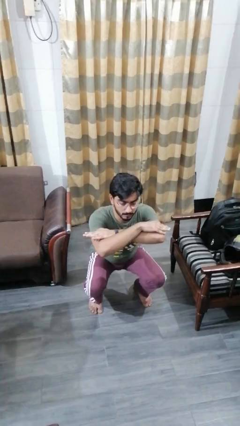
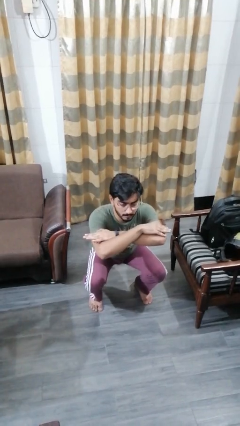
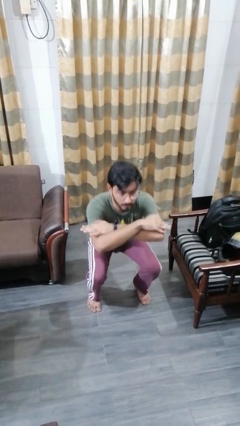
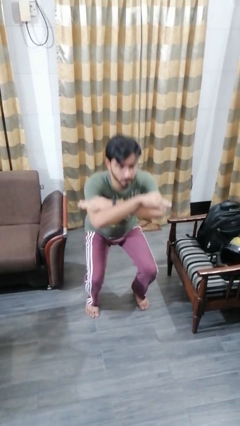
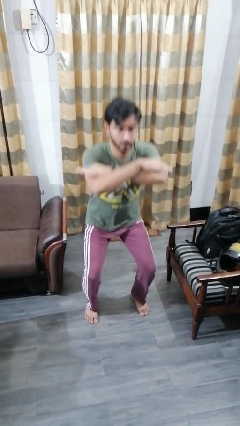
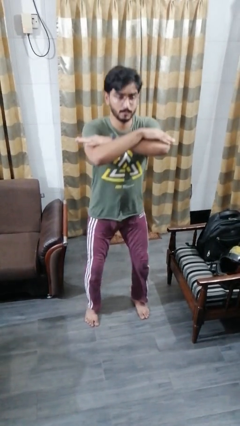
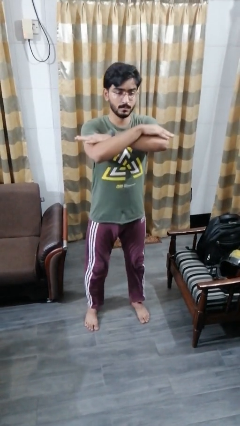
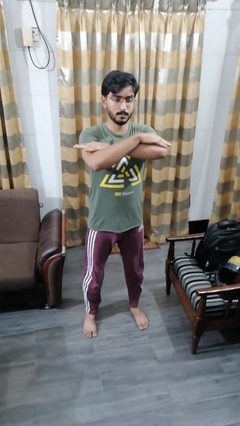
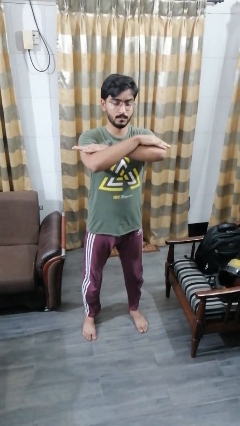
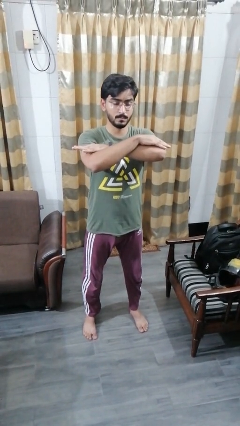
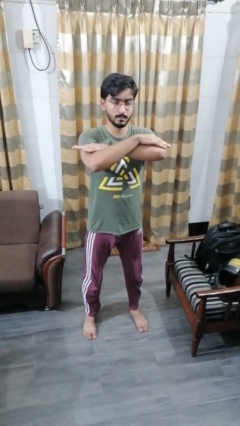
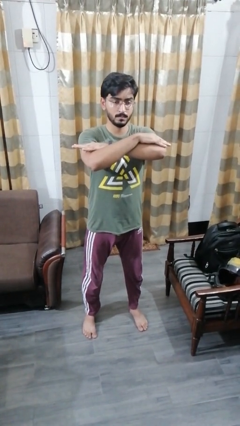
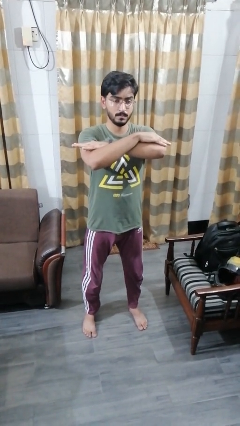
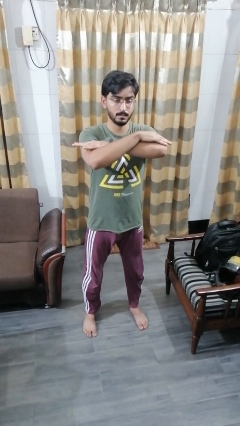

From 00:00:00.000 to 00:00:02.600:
person stands up from floor

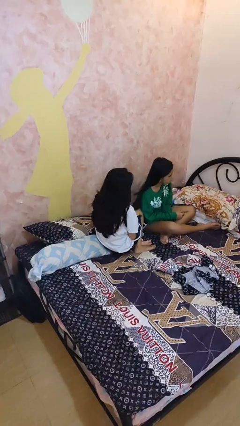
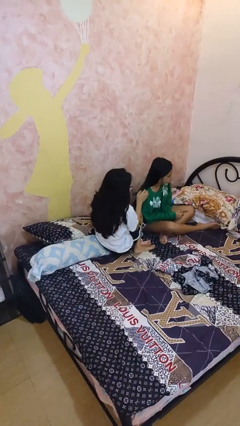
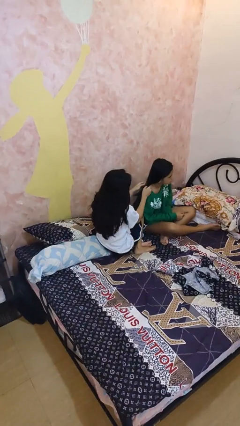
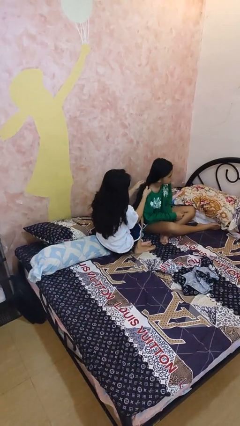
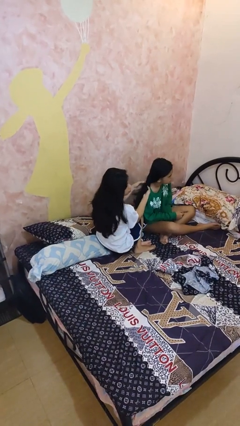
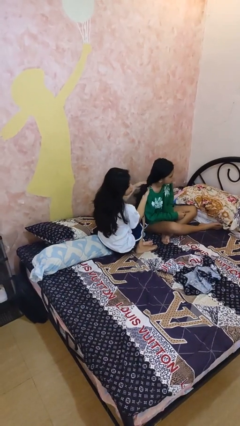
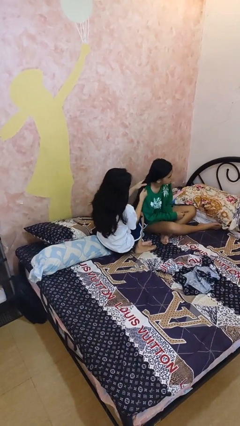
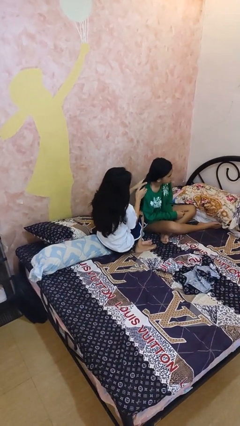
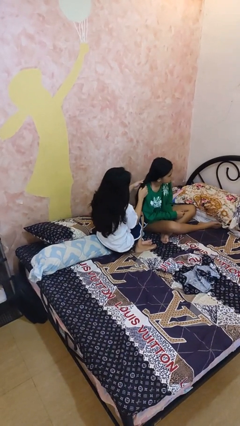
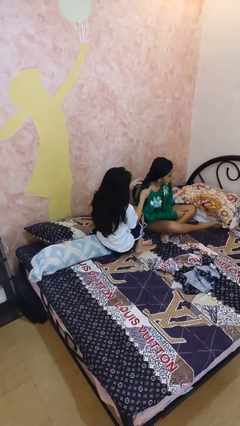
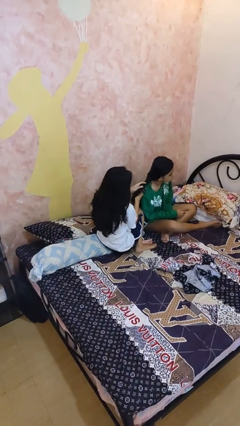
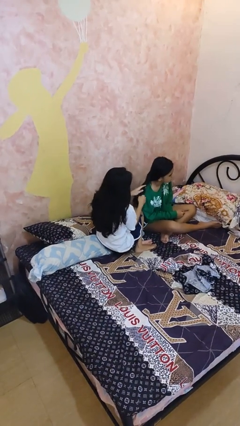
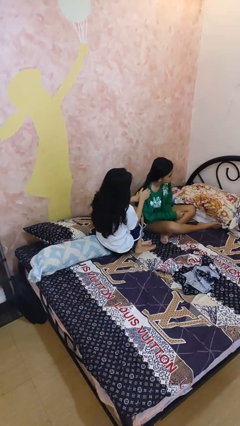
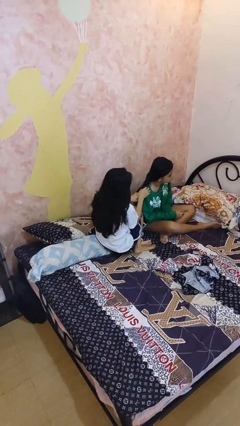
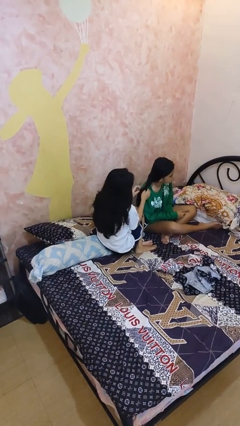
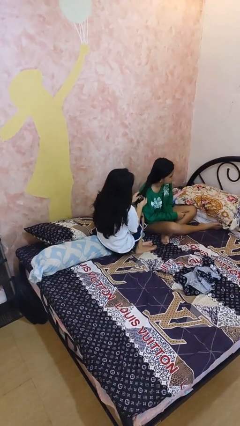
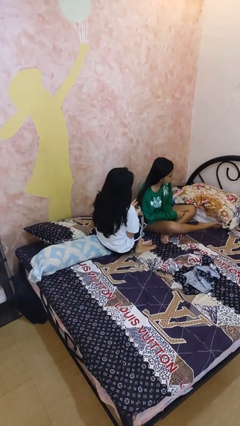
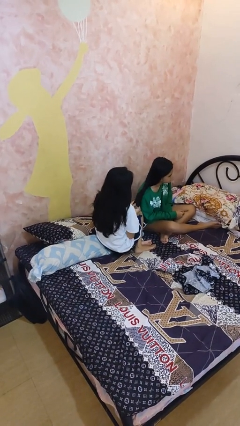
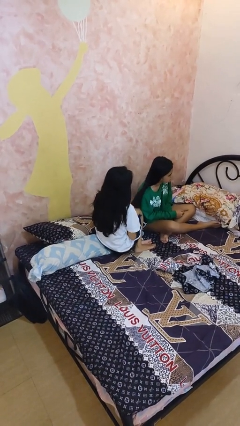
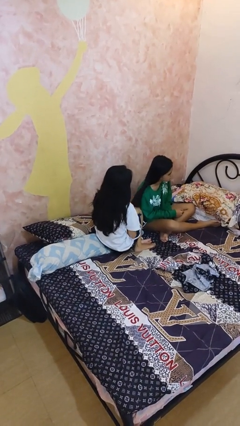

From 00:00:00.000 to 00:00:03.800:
person braids hair of person

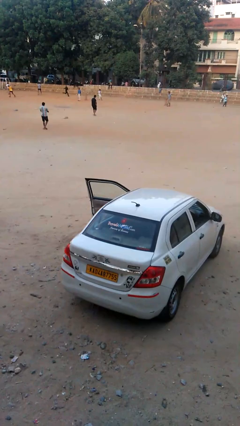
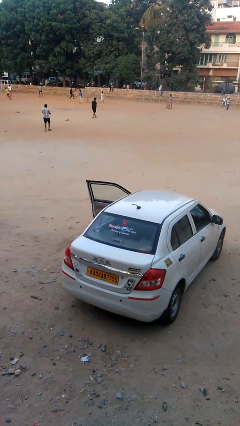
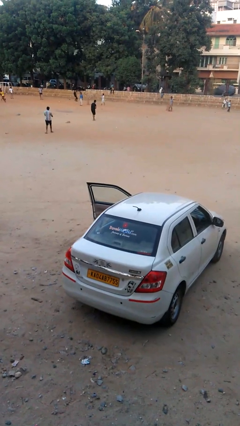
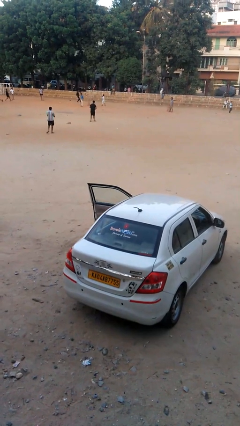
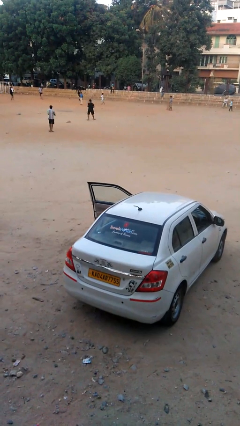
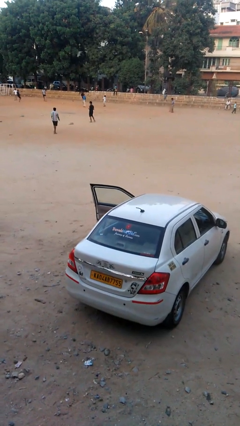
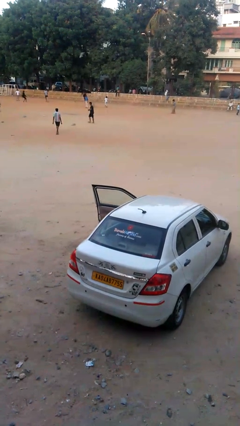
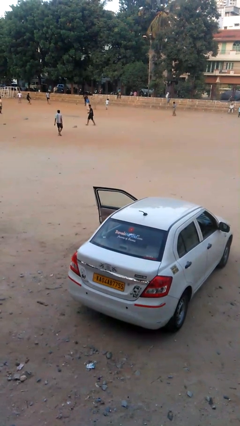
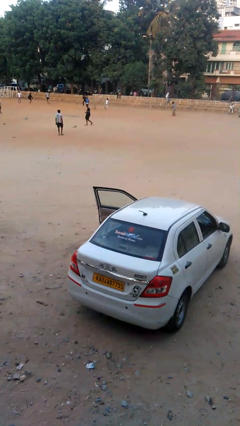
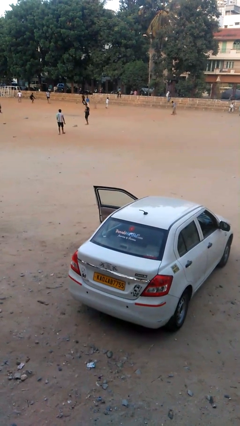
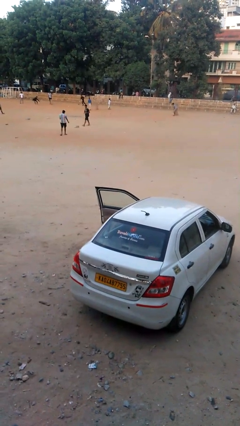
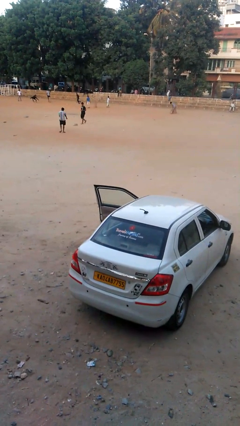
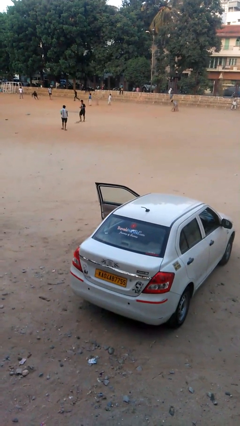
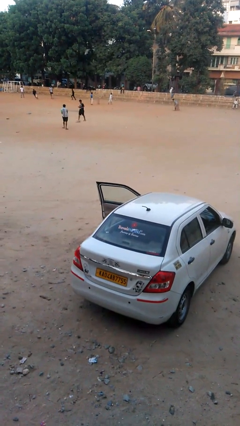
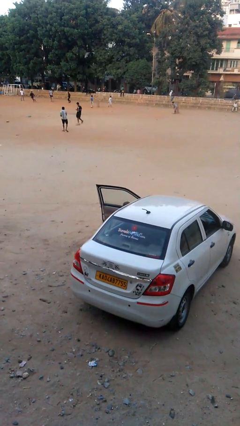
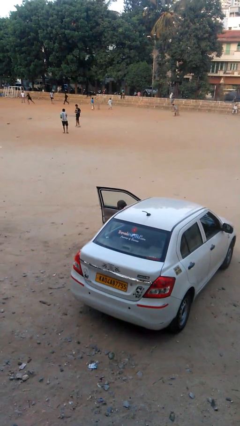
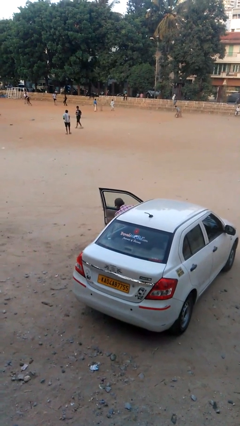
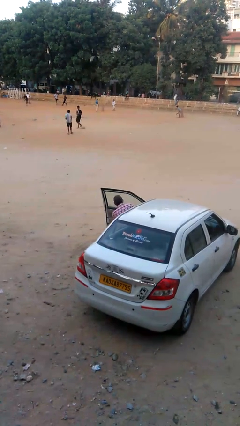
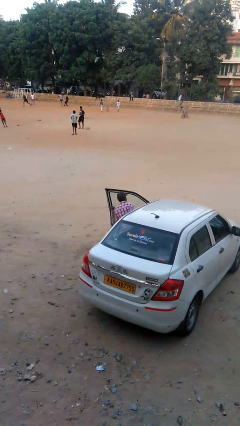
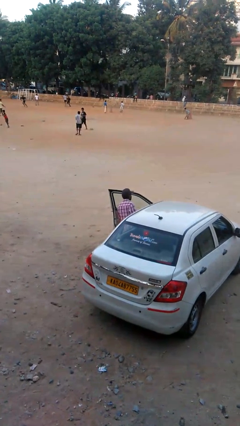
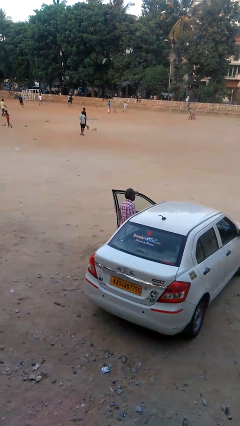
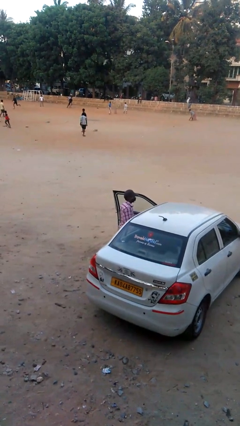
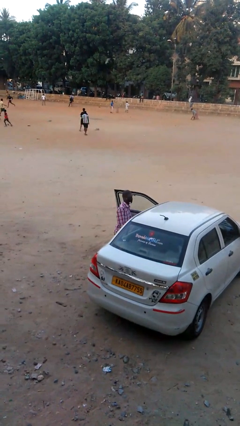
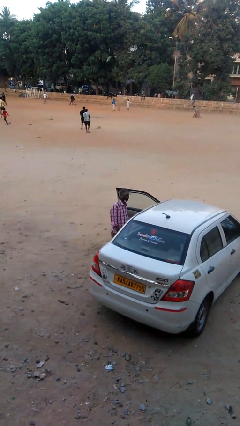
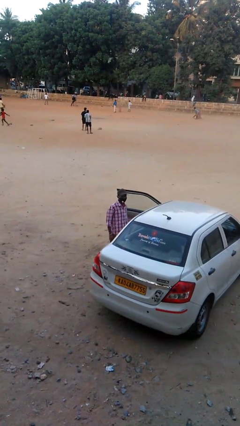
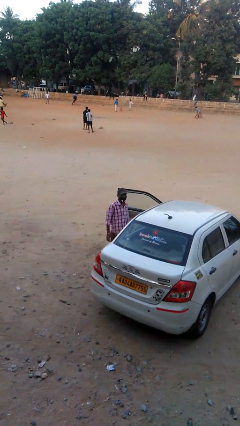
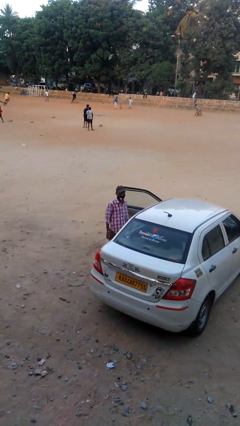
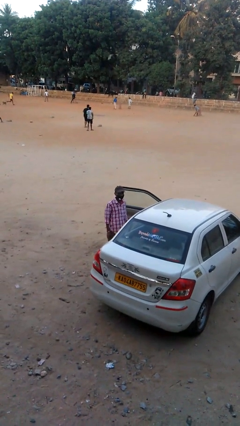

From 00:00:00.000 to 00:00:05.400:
person exits car

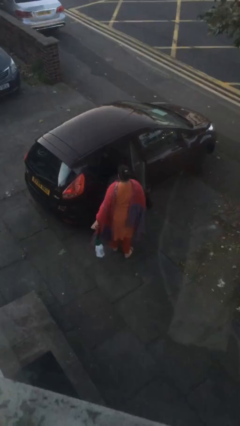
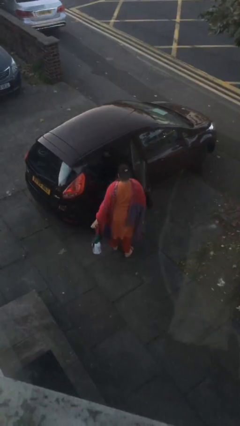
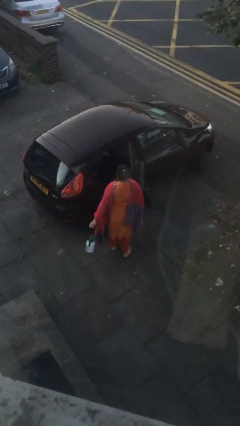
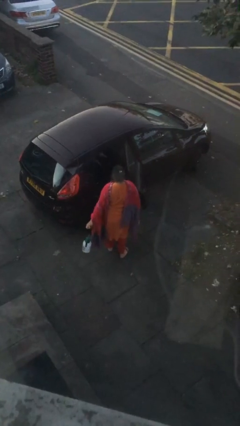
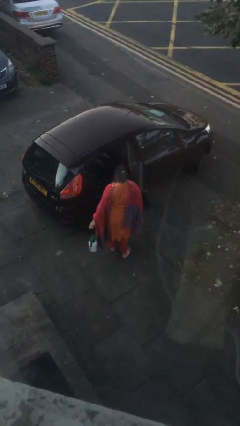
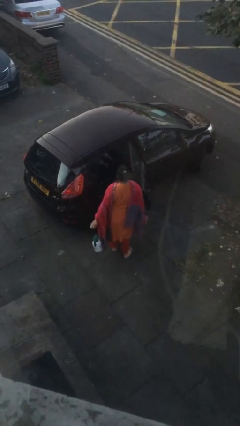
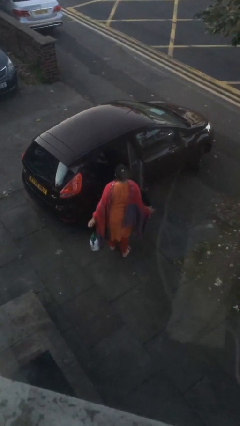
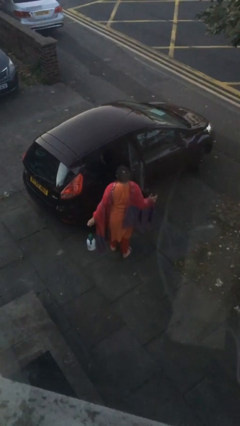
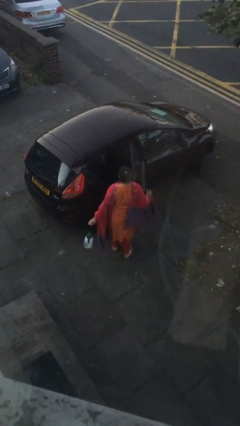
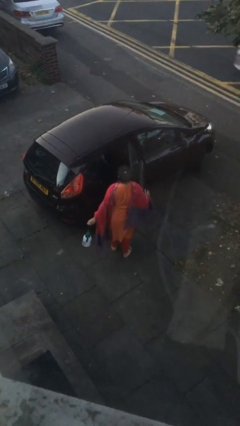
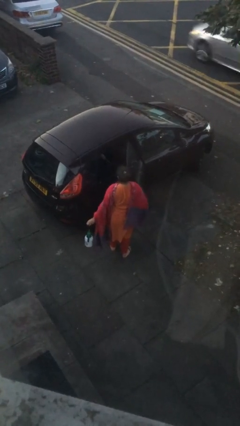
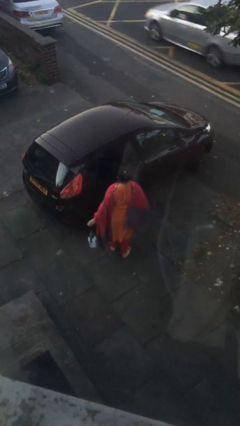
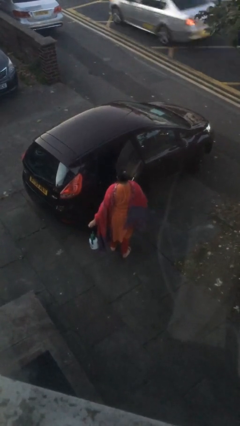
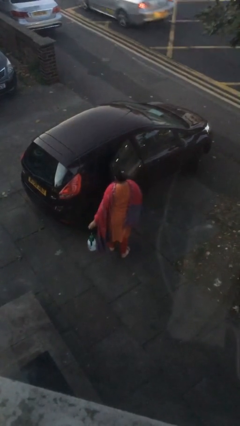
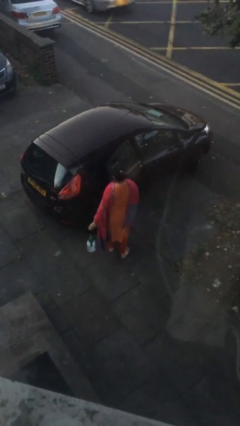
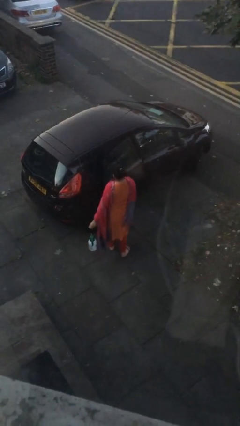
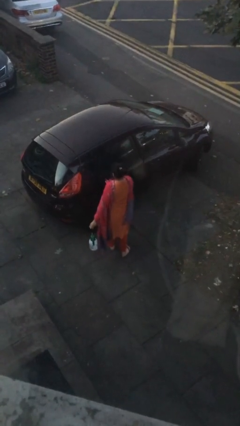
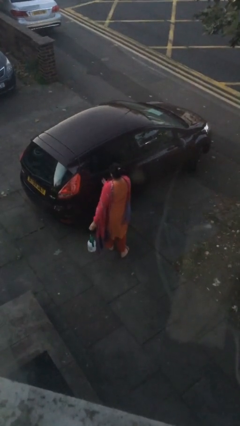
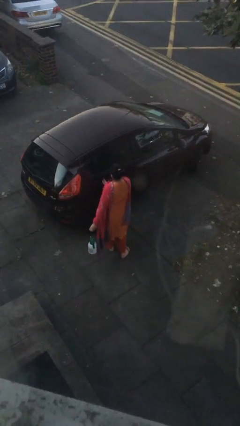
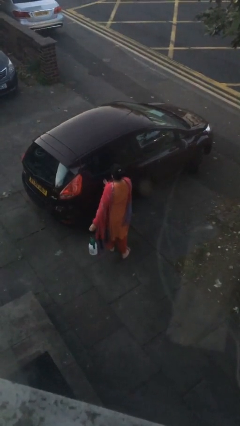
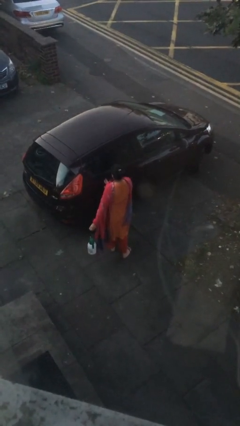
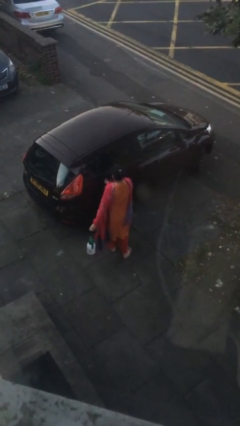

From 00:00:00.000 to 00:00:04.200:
person closes car door

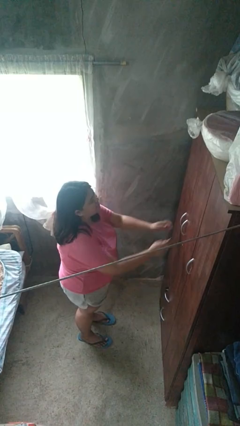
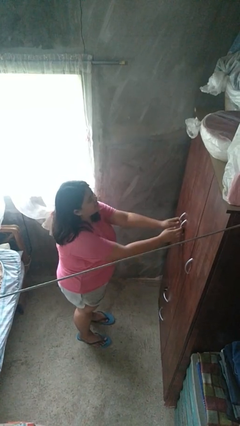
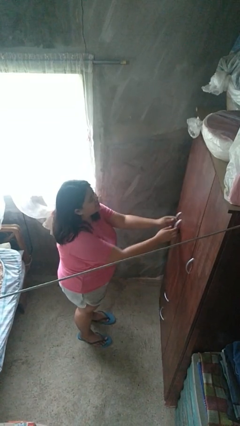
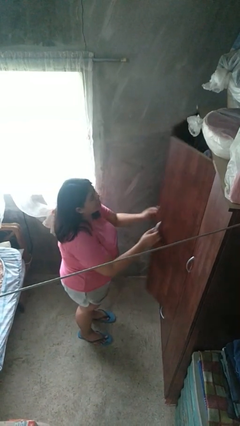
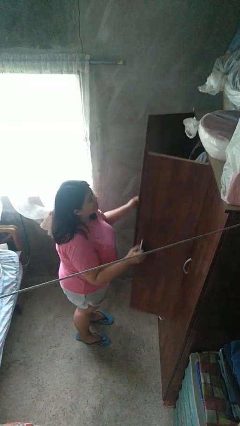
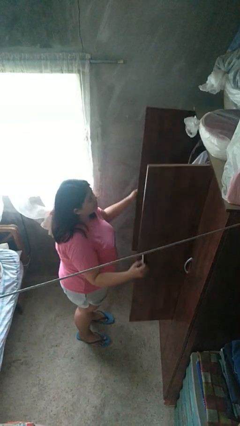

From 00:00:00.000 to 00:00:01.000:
person opens closet door

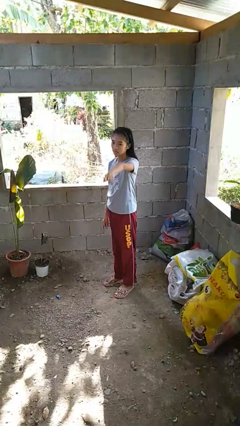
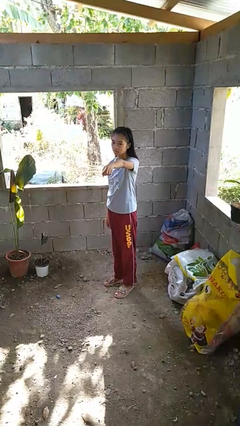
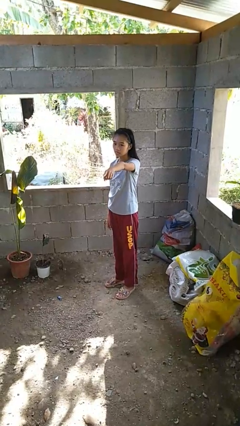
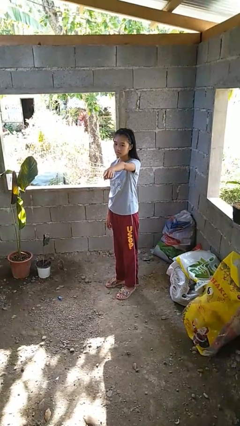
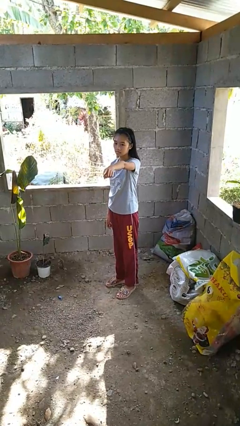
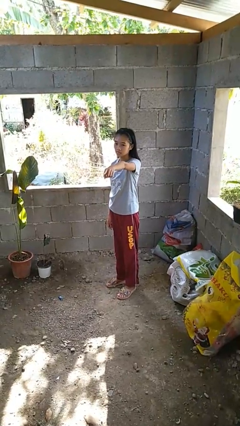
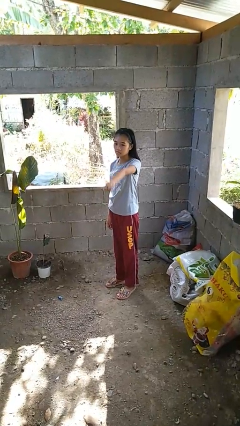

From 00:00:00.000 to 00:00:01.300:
person points at person
